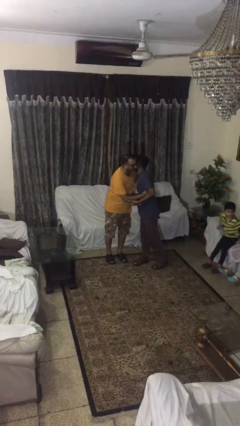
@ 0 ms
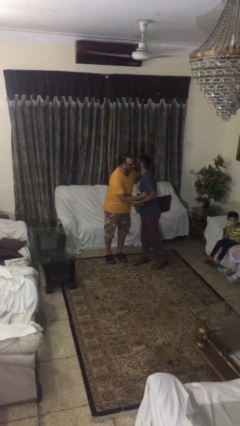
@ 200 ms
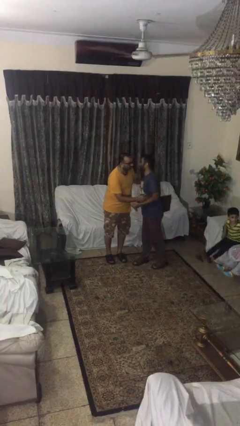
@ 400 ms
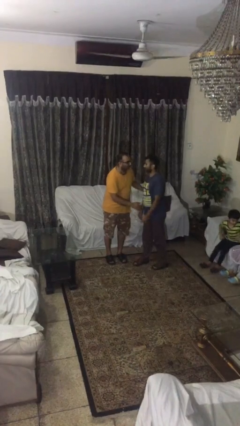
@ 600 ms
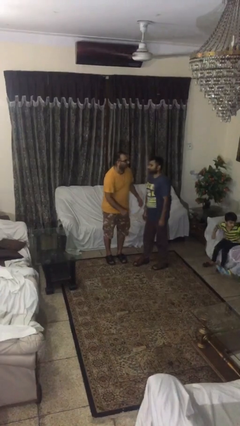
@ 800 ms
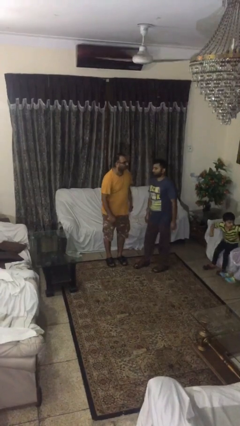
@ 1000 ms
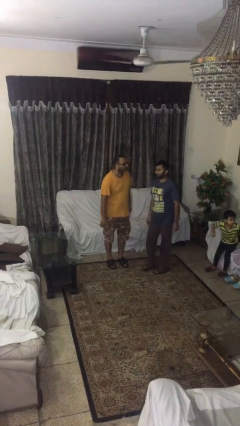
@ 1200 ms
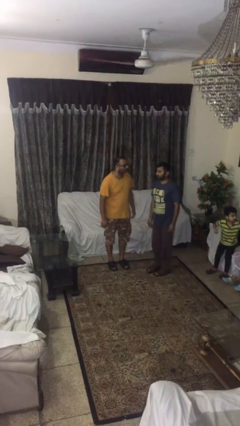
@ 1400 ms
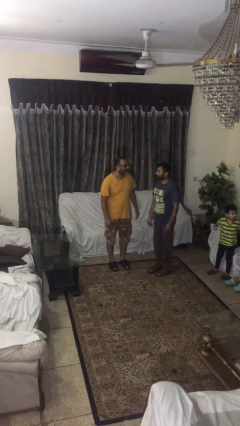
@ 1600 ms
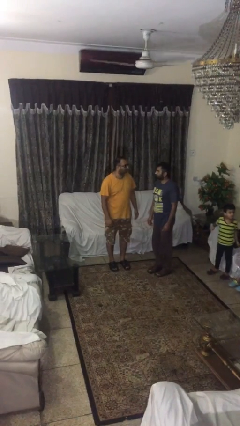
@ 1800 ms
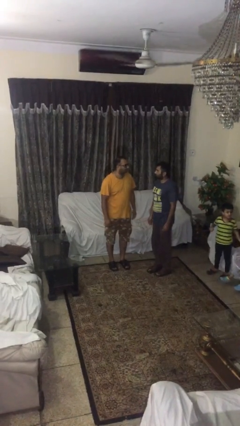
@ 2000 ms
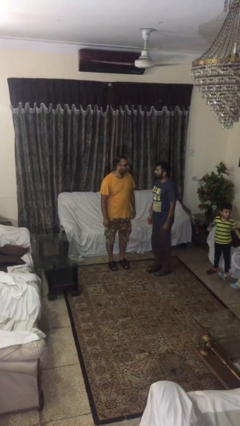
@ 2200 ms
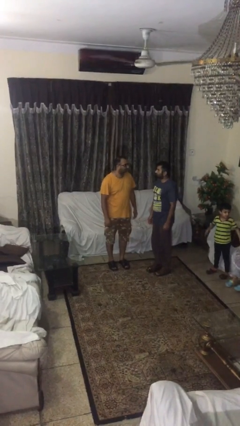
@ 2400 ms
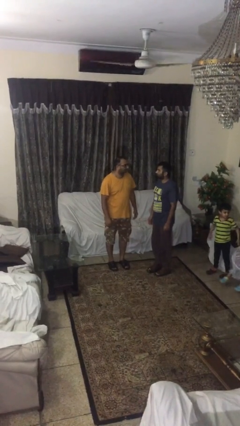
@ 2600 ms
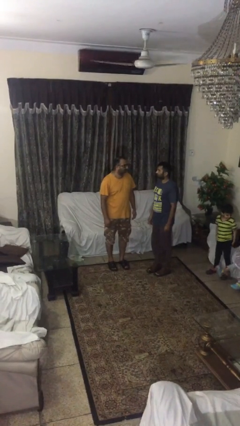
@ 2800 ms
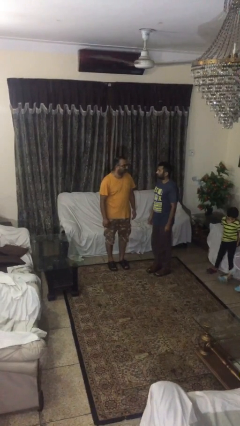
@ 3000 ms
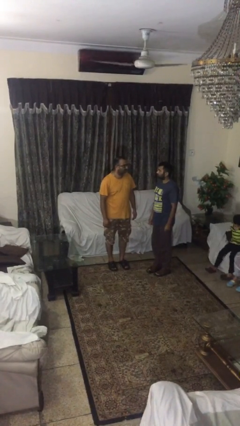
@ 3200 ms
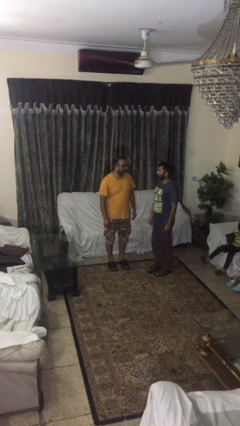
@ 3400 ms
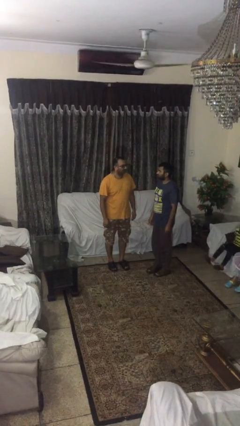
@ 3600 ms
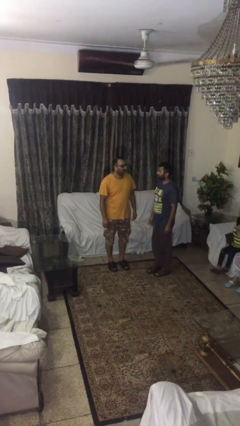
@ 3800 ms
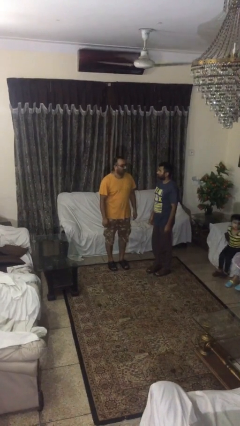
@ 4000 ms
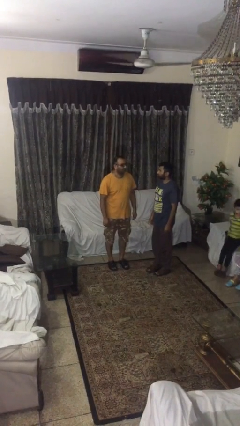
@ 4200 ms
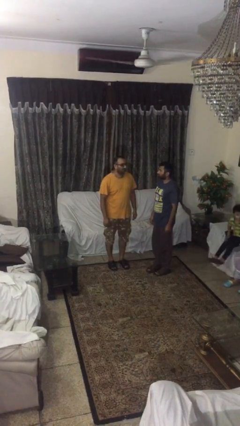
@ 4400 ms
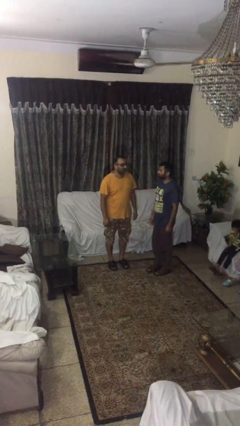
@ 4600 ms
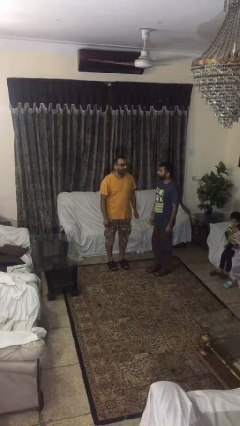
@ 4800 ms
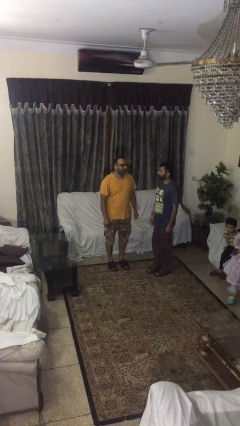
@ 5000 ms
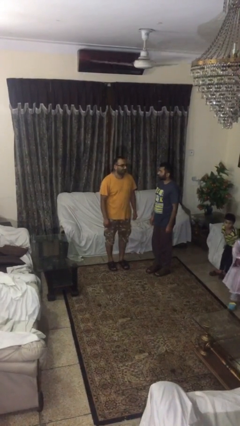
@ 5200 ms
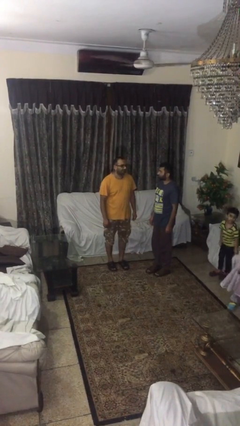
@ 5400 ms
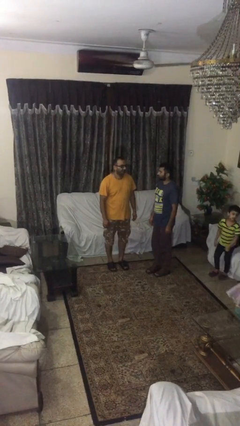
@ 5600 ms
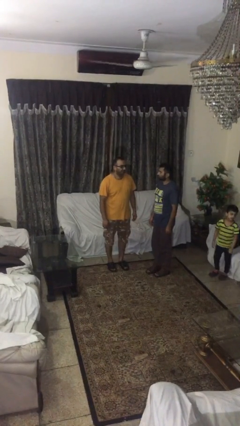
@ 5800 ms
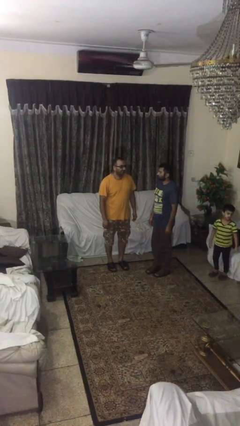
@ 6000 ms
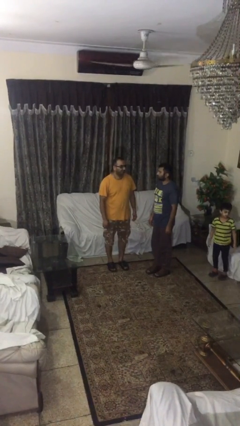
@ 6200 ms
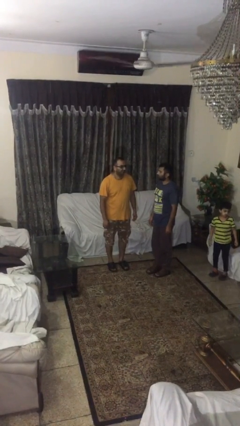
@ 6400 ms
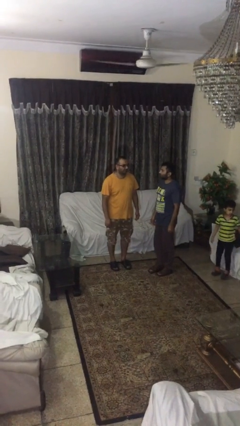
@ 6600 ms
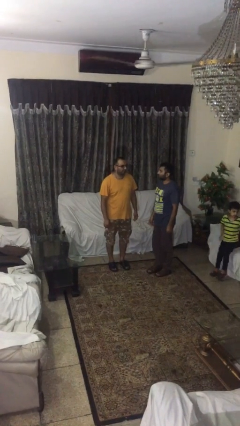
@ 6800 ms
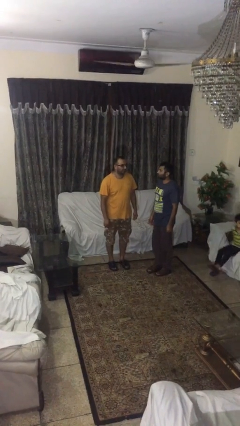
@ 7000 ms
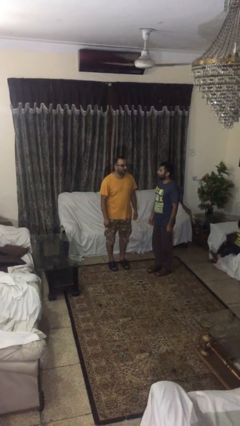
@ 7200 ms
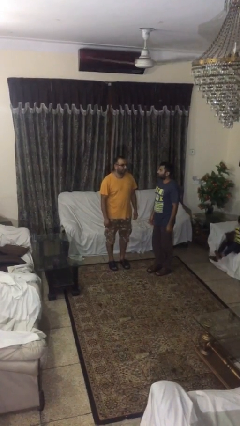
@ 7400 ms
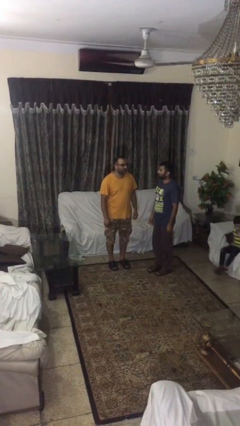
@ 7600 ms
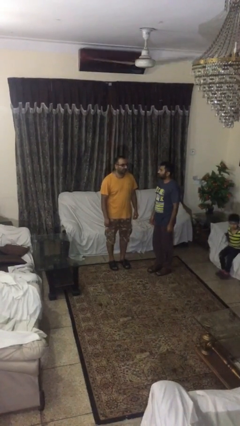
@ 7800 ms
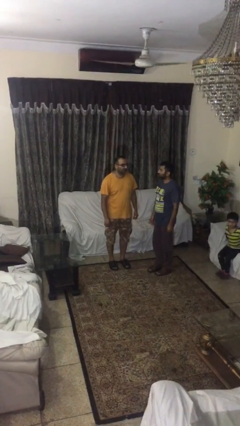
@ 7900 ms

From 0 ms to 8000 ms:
person talks to person

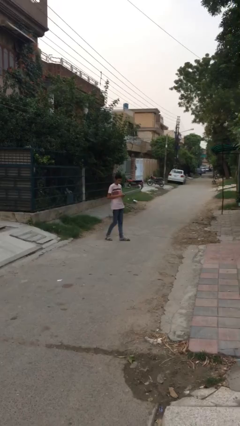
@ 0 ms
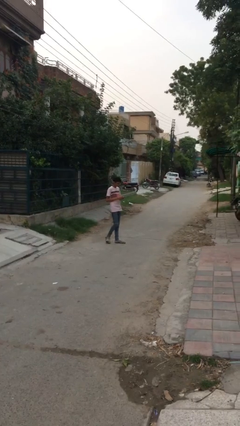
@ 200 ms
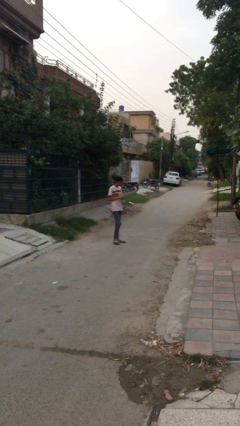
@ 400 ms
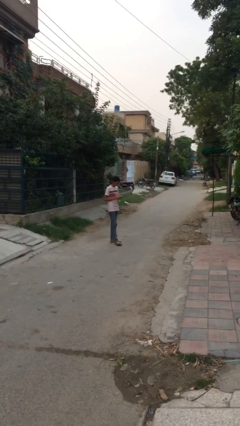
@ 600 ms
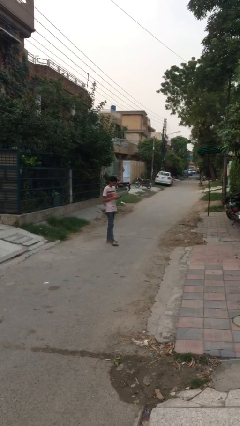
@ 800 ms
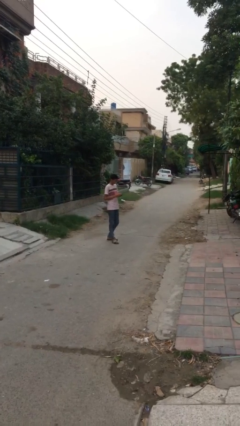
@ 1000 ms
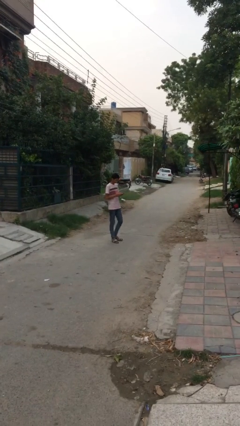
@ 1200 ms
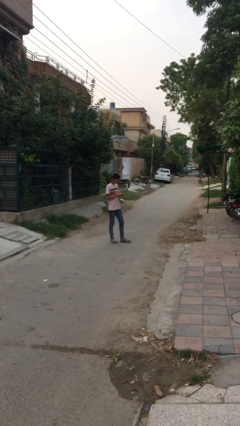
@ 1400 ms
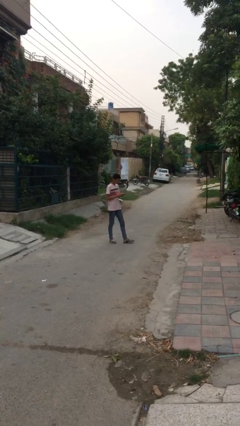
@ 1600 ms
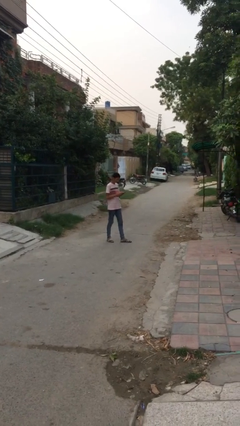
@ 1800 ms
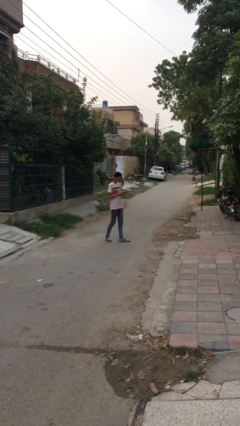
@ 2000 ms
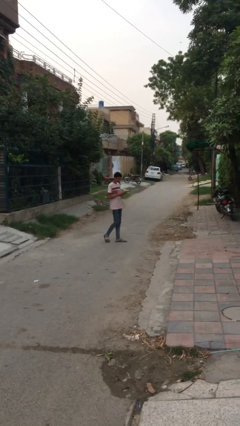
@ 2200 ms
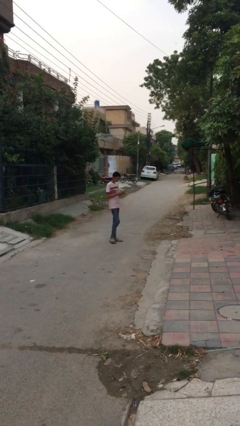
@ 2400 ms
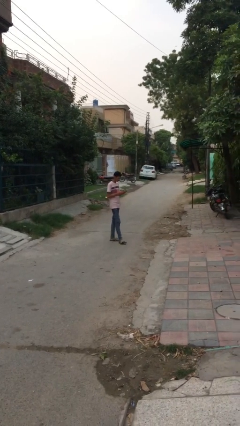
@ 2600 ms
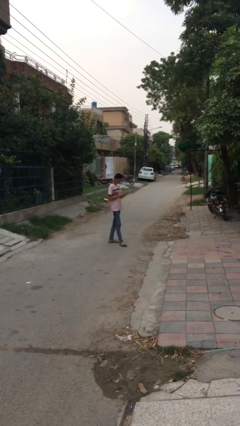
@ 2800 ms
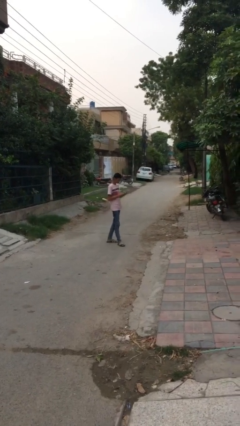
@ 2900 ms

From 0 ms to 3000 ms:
person texts on phone

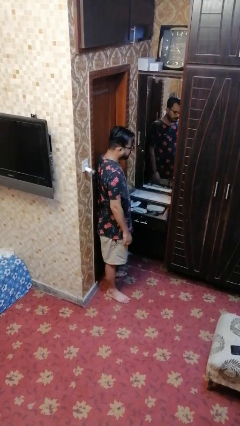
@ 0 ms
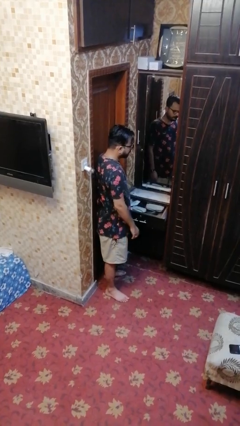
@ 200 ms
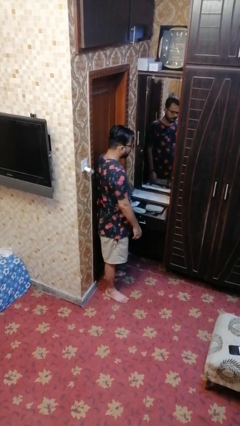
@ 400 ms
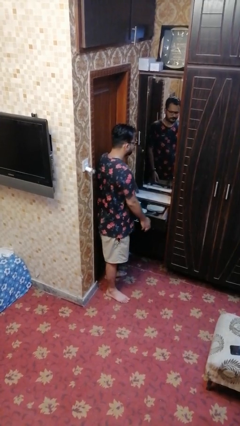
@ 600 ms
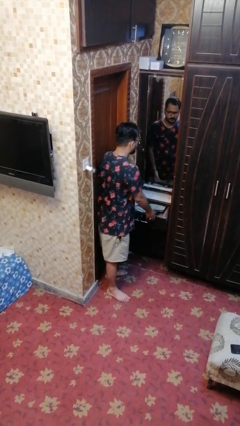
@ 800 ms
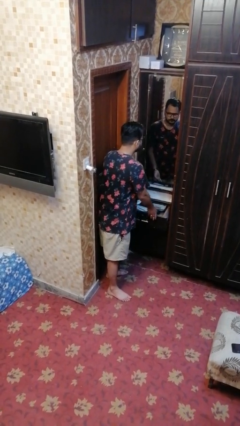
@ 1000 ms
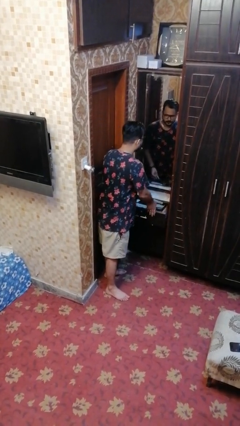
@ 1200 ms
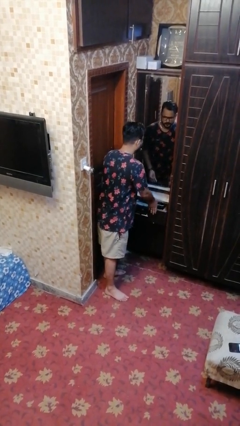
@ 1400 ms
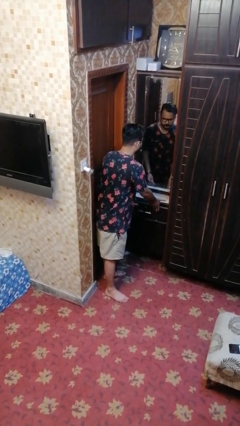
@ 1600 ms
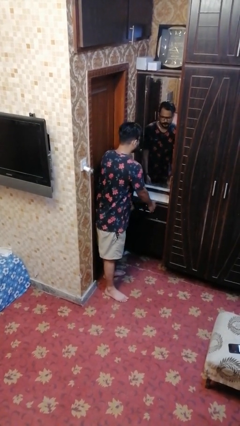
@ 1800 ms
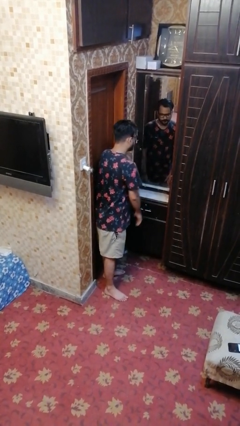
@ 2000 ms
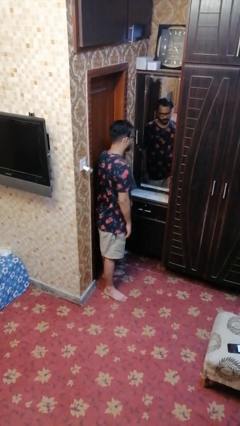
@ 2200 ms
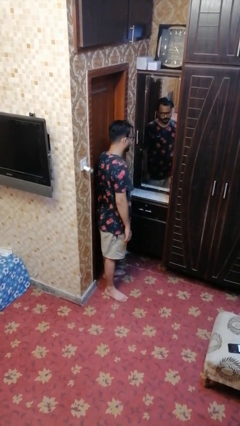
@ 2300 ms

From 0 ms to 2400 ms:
person closes dresser drawer

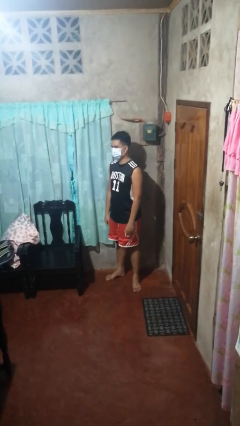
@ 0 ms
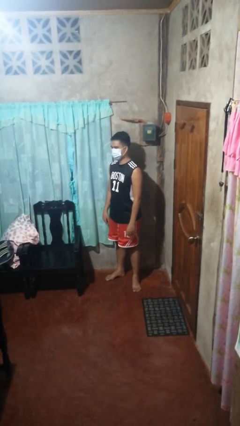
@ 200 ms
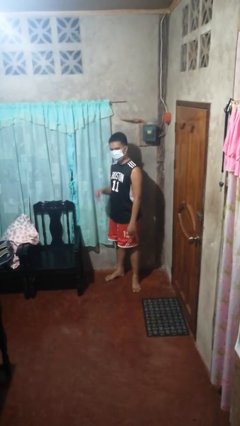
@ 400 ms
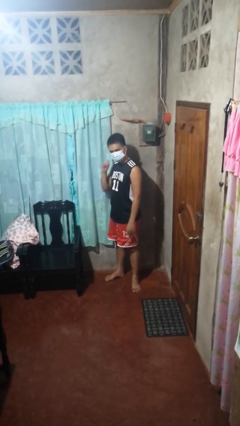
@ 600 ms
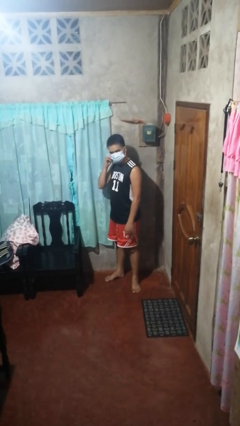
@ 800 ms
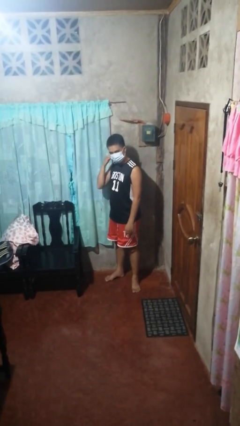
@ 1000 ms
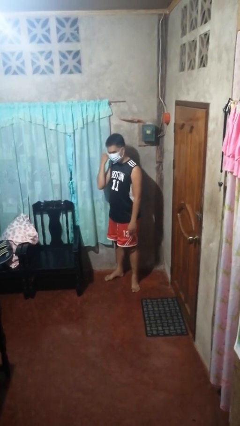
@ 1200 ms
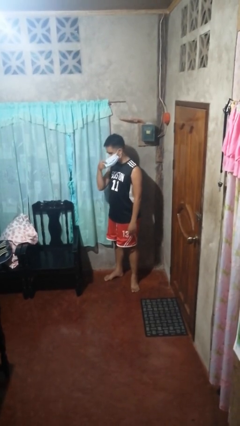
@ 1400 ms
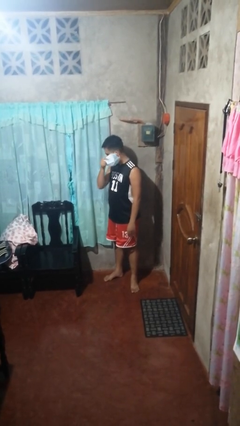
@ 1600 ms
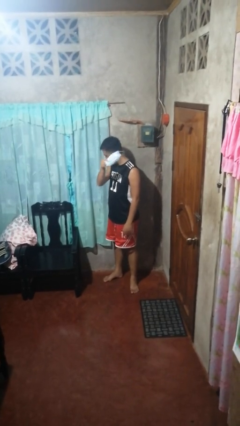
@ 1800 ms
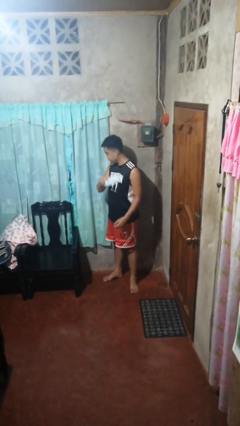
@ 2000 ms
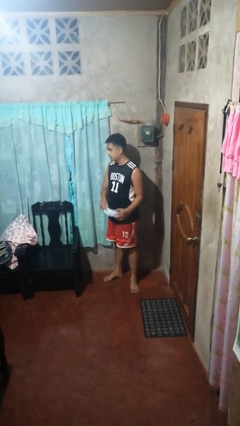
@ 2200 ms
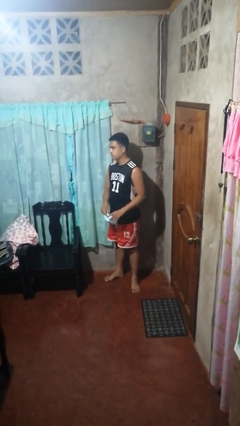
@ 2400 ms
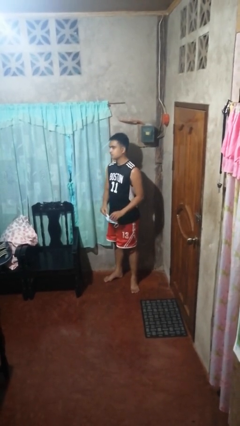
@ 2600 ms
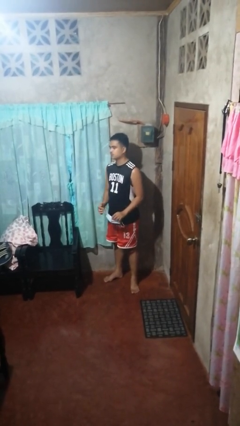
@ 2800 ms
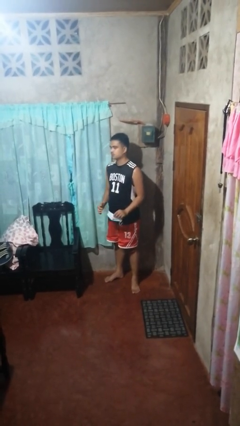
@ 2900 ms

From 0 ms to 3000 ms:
person takes off facemask

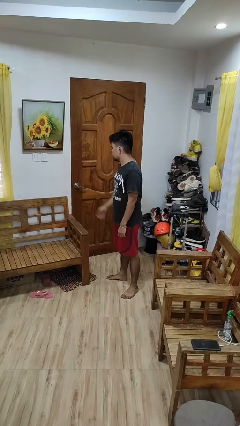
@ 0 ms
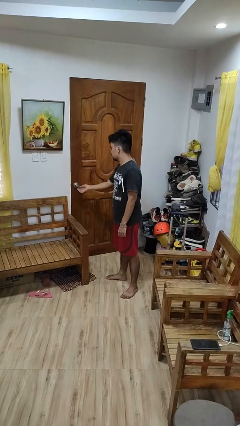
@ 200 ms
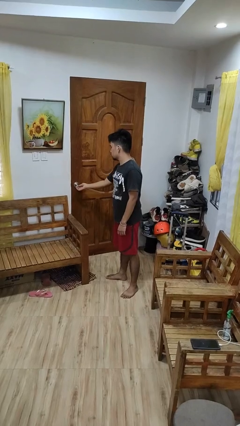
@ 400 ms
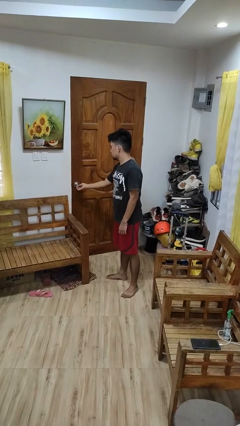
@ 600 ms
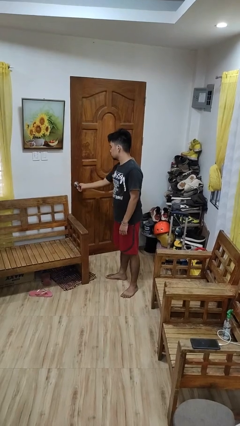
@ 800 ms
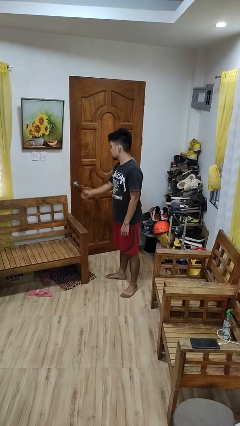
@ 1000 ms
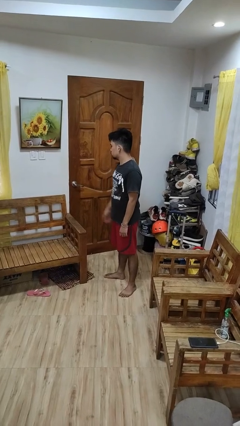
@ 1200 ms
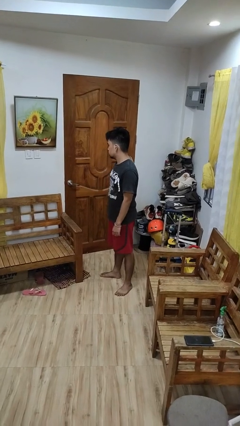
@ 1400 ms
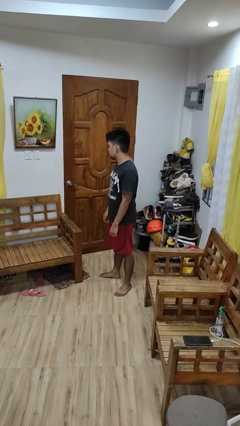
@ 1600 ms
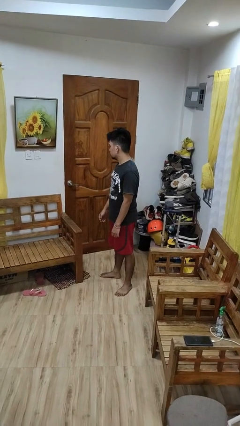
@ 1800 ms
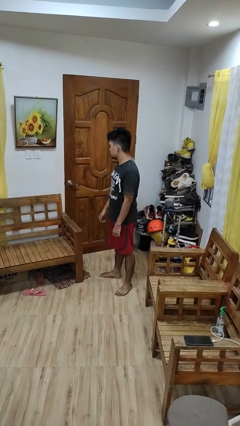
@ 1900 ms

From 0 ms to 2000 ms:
person locks door with keys
